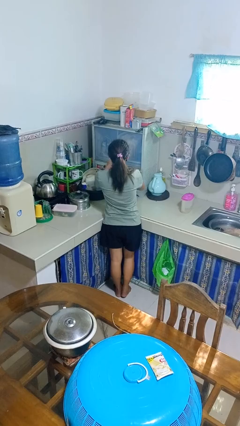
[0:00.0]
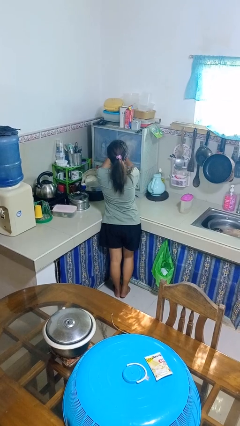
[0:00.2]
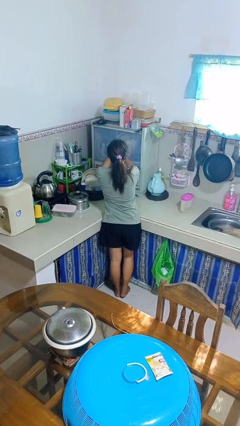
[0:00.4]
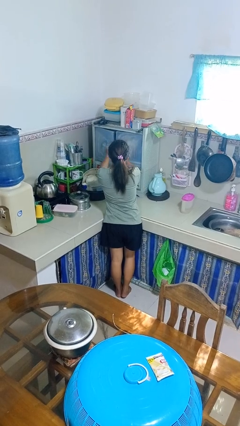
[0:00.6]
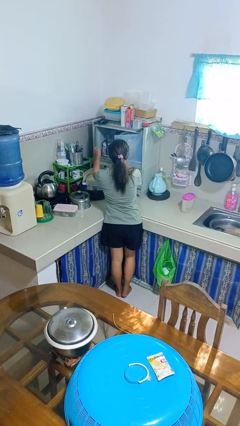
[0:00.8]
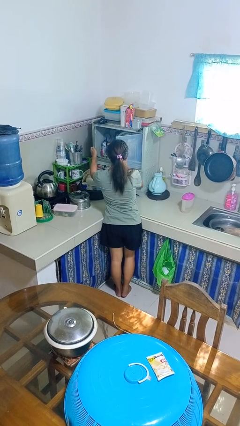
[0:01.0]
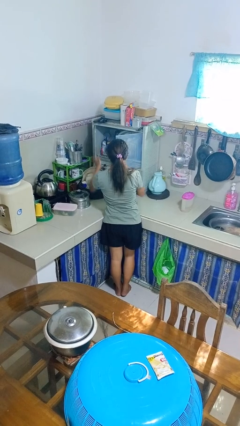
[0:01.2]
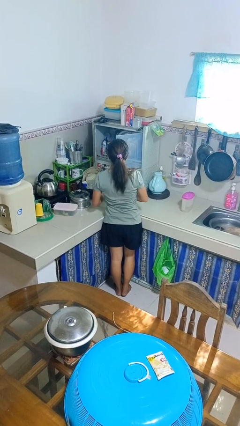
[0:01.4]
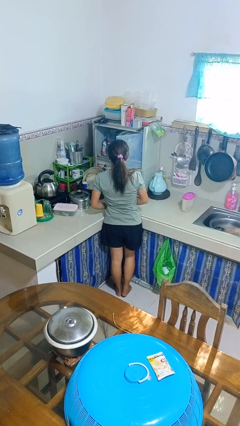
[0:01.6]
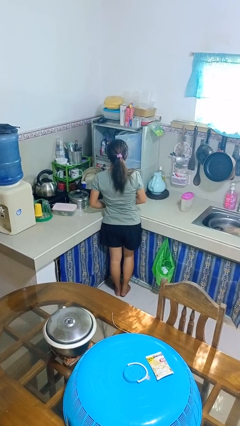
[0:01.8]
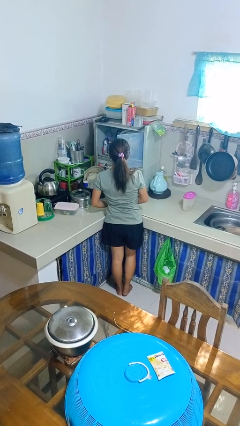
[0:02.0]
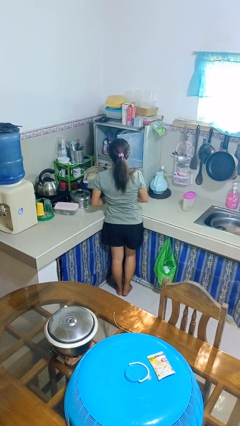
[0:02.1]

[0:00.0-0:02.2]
person opens kitchen drawer

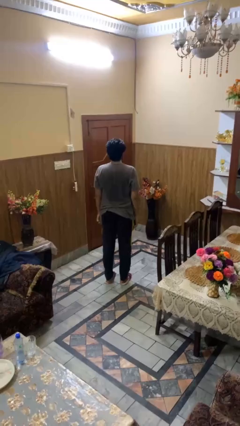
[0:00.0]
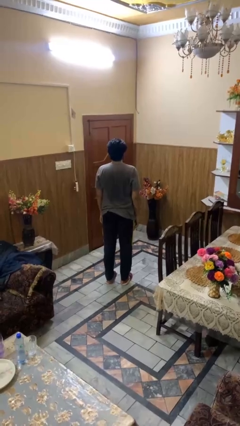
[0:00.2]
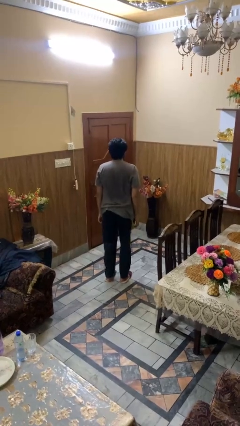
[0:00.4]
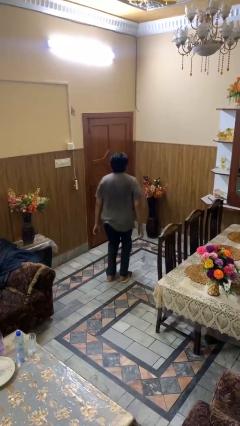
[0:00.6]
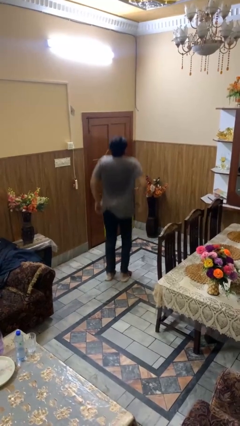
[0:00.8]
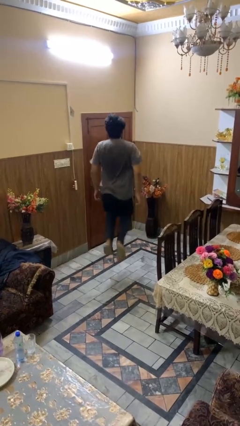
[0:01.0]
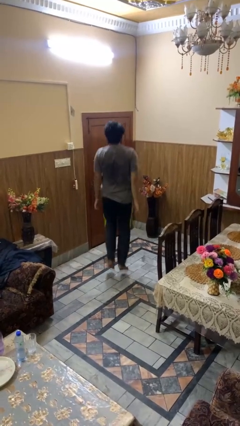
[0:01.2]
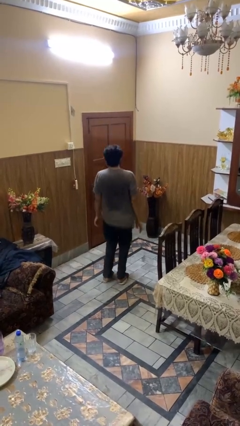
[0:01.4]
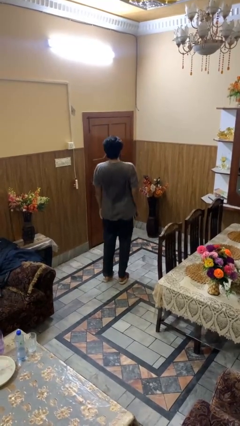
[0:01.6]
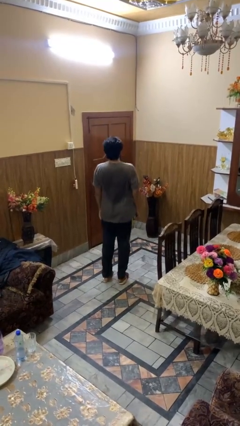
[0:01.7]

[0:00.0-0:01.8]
person jumps

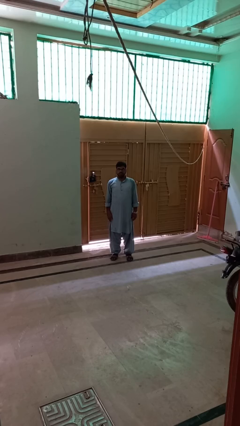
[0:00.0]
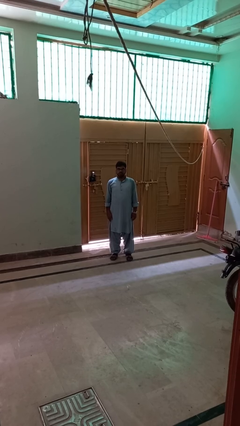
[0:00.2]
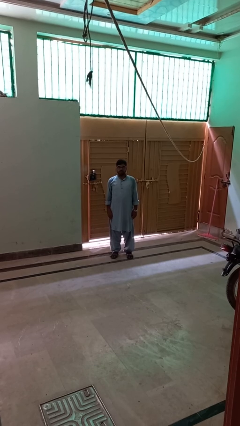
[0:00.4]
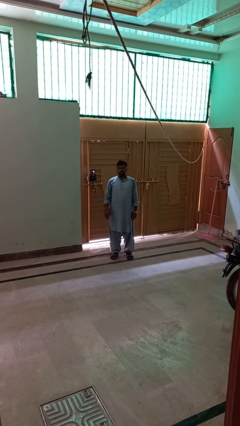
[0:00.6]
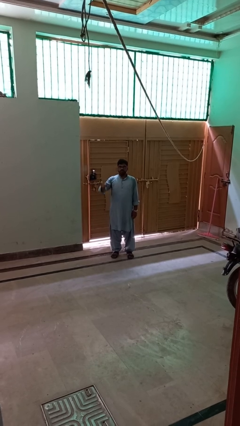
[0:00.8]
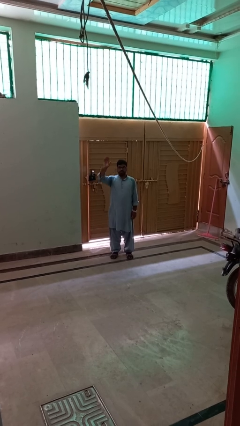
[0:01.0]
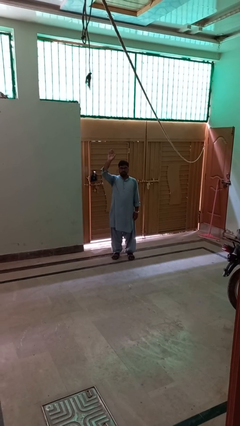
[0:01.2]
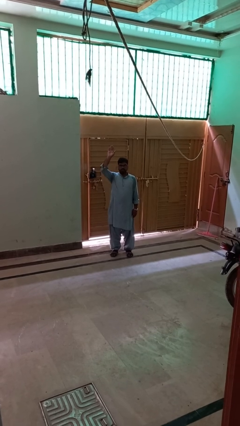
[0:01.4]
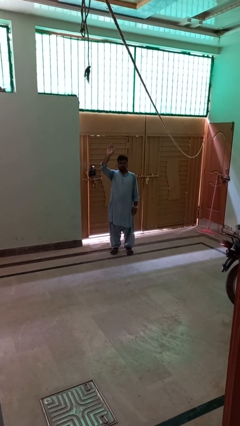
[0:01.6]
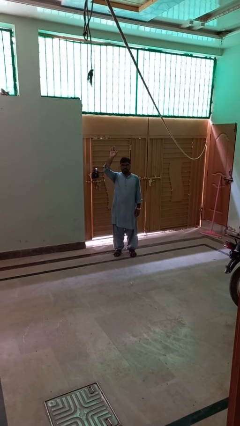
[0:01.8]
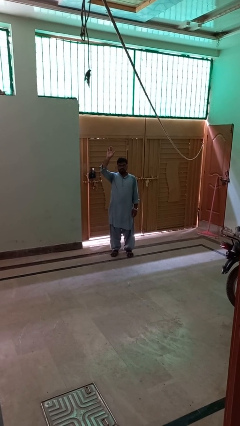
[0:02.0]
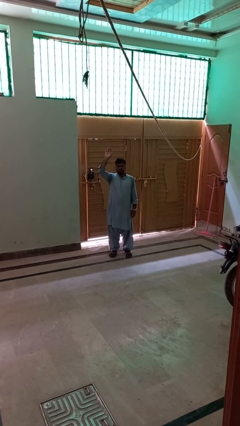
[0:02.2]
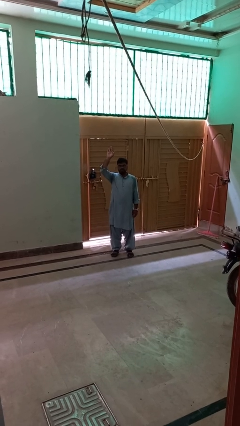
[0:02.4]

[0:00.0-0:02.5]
person gestures raise hand

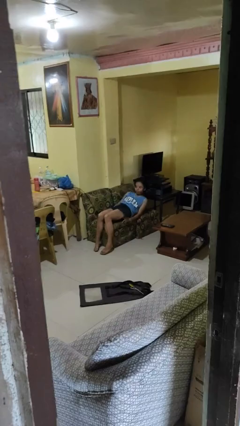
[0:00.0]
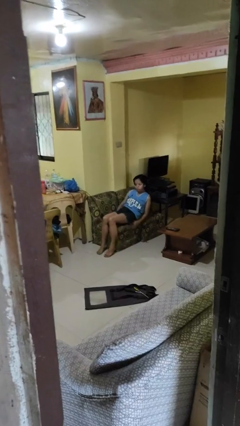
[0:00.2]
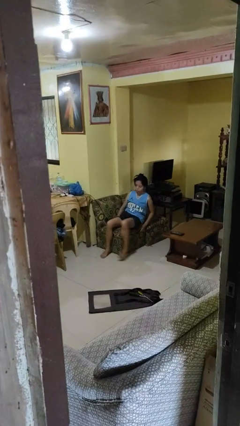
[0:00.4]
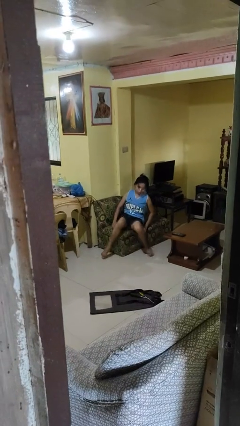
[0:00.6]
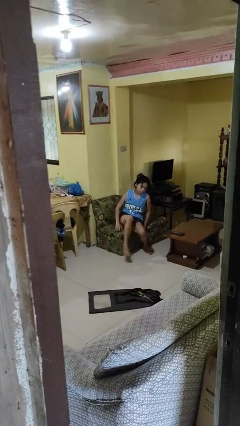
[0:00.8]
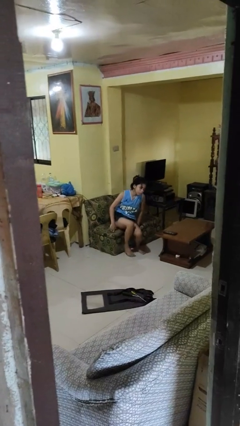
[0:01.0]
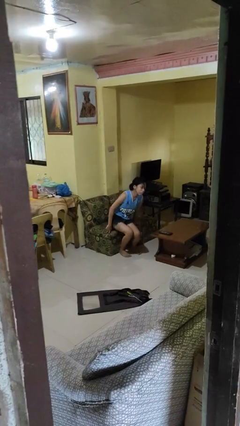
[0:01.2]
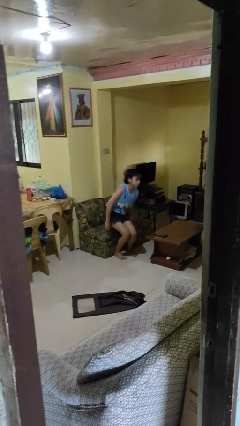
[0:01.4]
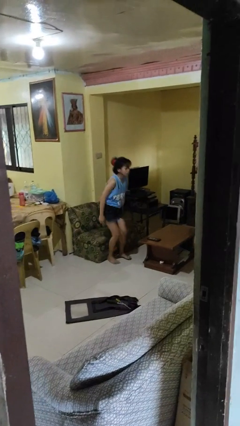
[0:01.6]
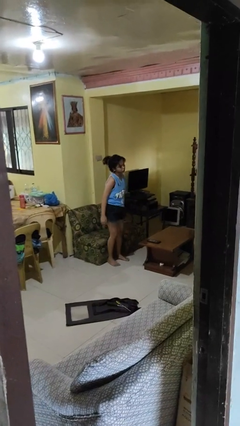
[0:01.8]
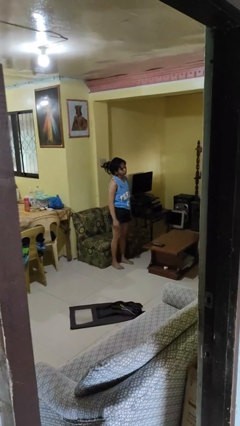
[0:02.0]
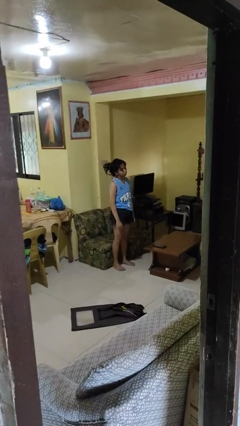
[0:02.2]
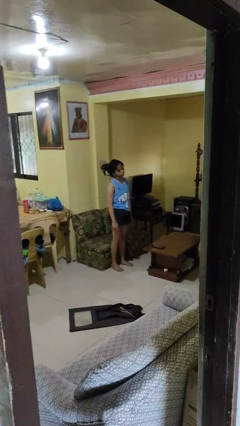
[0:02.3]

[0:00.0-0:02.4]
person stands up

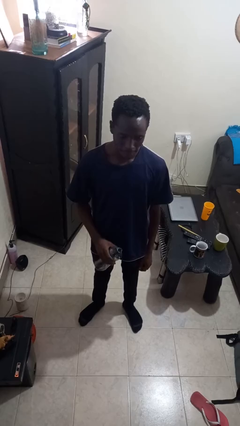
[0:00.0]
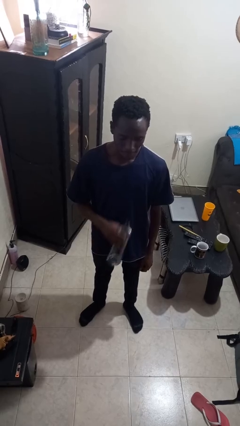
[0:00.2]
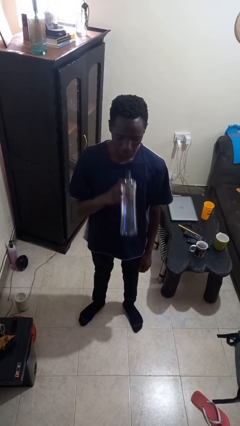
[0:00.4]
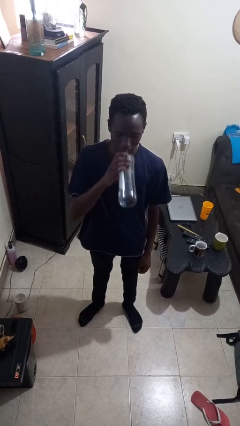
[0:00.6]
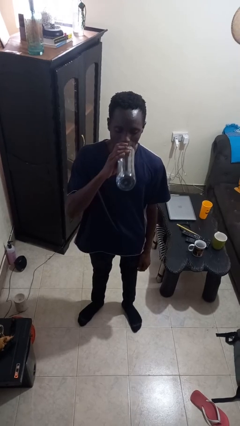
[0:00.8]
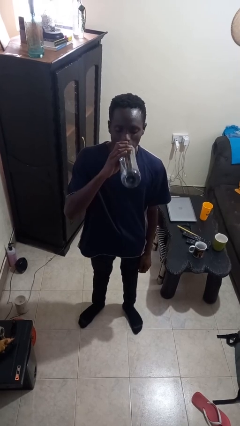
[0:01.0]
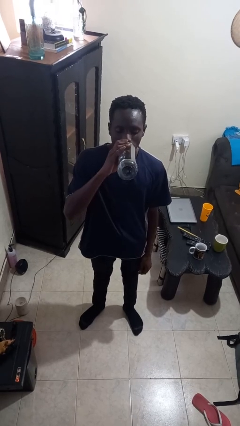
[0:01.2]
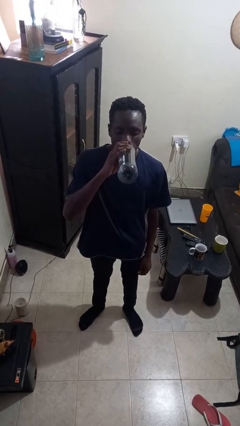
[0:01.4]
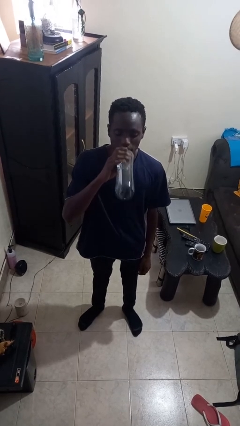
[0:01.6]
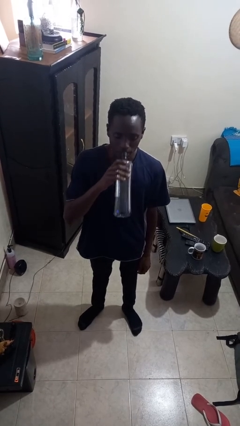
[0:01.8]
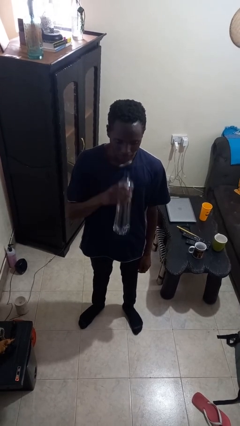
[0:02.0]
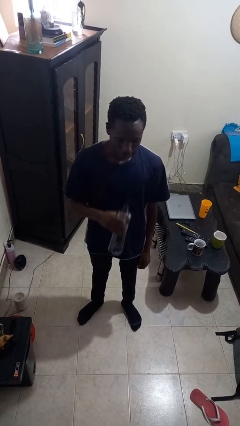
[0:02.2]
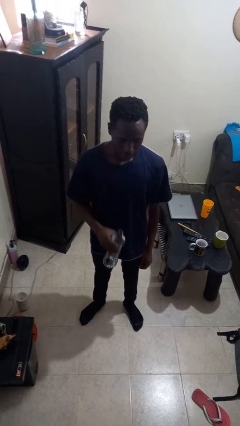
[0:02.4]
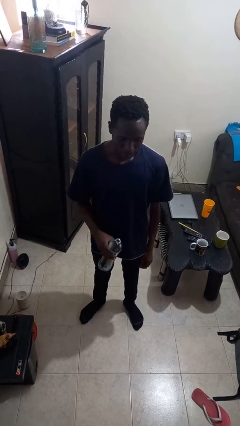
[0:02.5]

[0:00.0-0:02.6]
person drinks from bottle

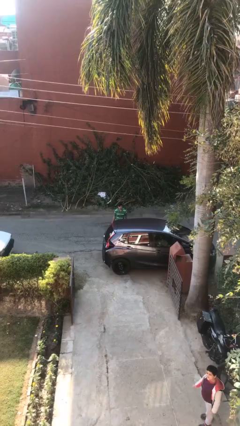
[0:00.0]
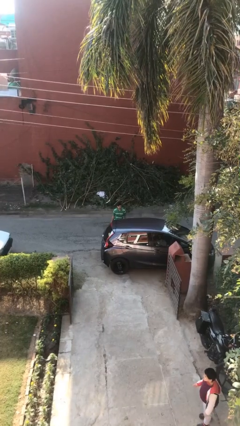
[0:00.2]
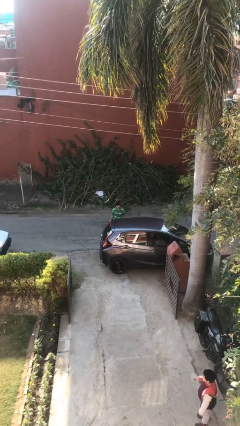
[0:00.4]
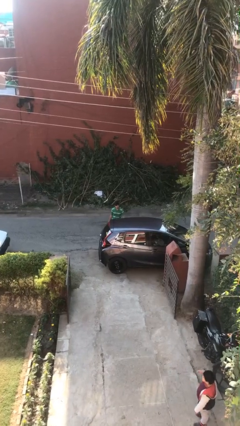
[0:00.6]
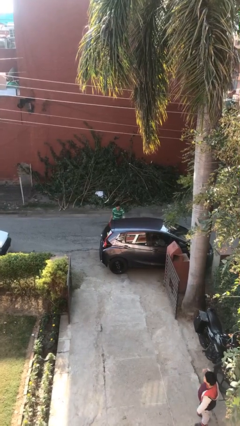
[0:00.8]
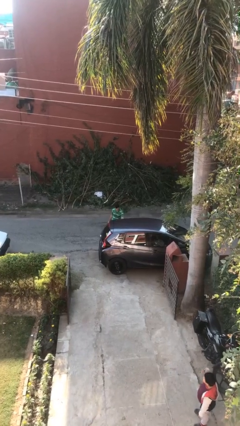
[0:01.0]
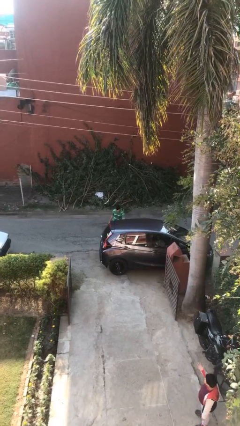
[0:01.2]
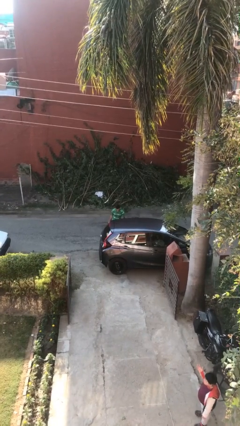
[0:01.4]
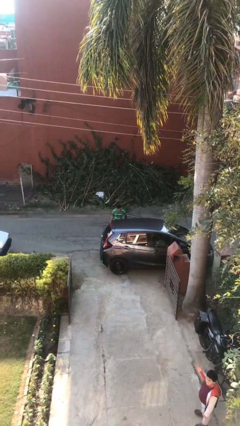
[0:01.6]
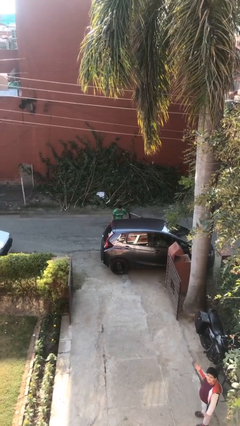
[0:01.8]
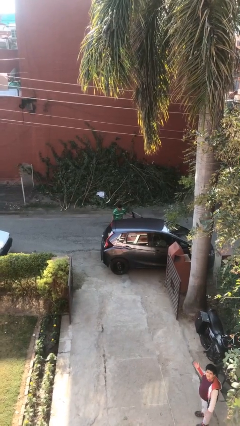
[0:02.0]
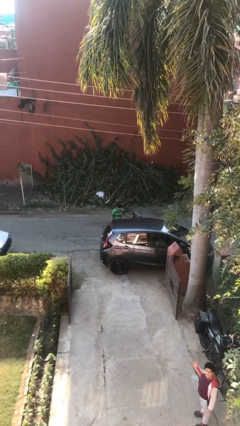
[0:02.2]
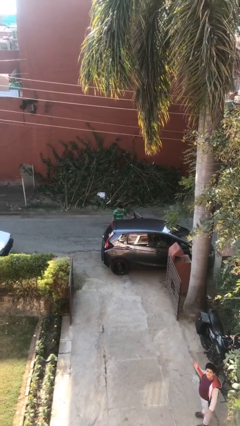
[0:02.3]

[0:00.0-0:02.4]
person opens car door

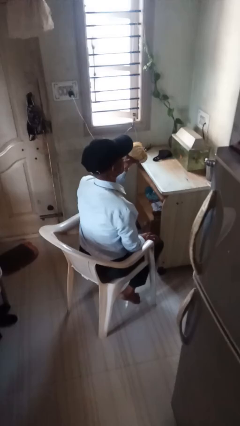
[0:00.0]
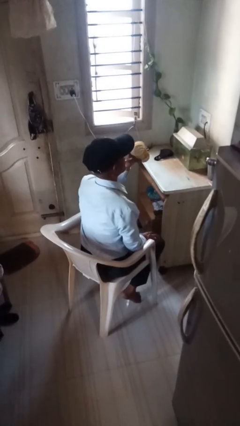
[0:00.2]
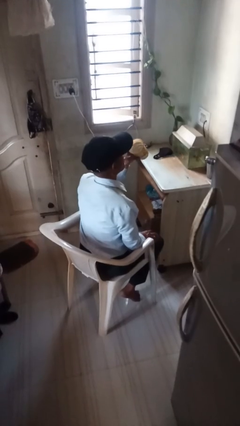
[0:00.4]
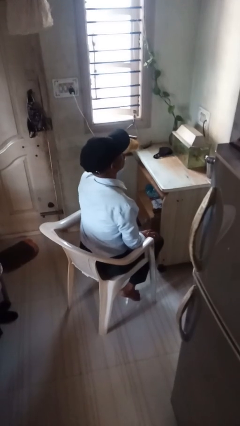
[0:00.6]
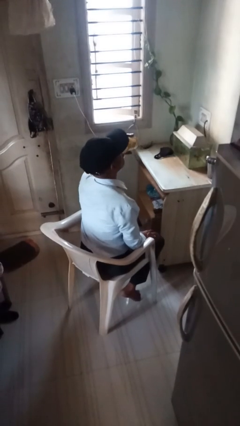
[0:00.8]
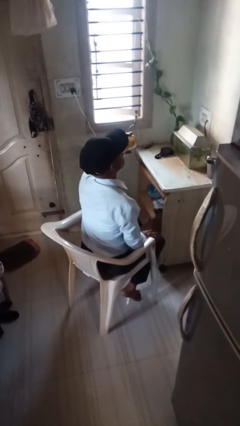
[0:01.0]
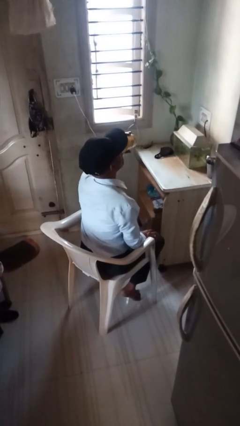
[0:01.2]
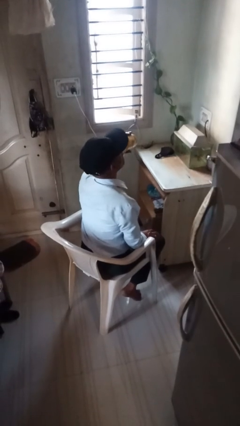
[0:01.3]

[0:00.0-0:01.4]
person drinks from mug

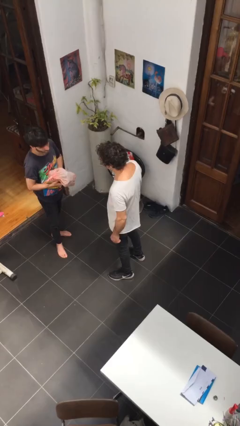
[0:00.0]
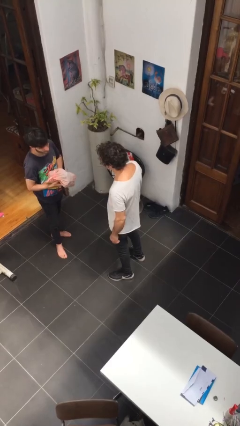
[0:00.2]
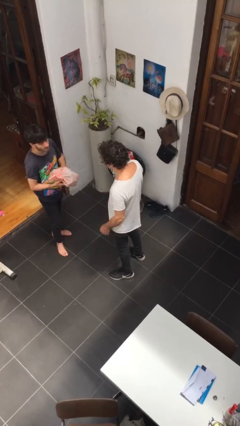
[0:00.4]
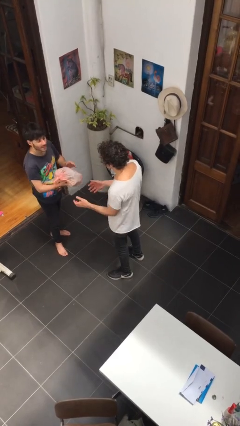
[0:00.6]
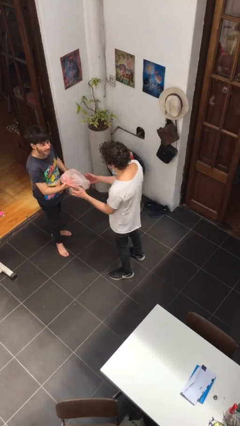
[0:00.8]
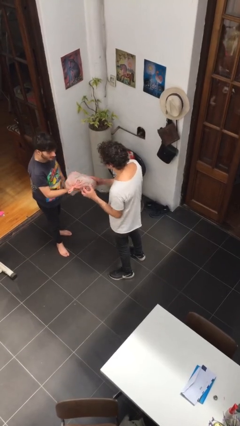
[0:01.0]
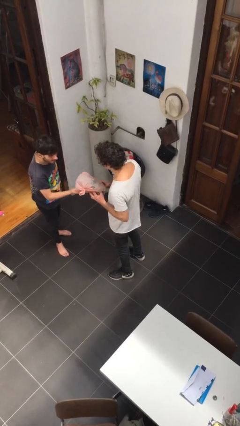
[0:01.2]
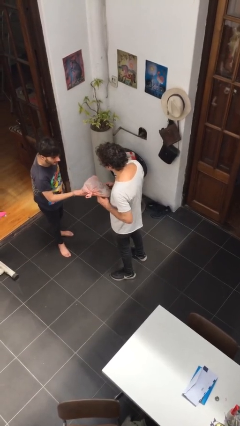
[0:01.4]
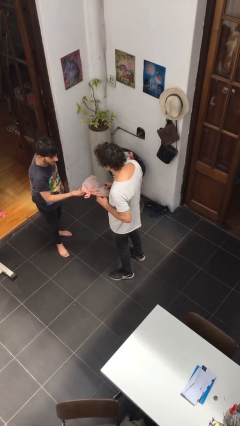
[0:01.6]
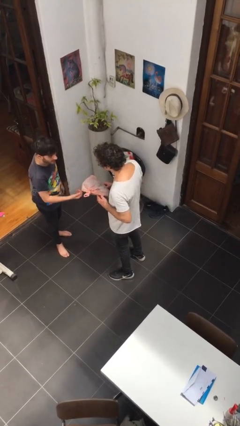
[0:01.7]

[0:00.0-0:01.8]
person transfers object to person
